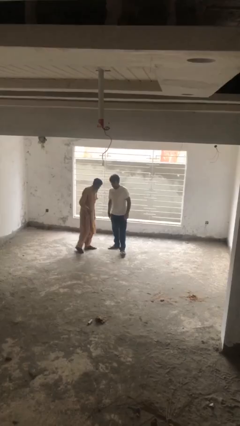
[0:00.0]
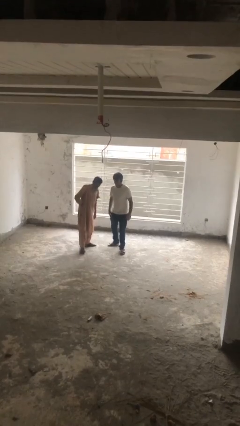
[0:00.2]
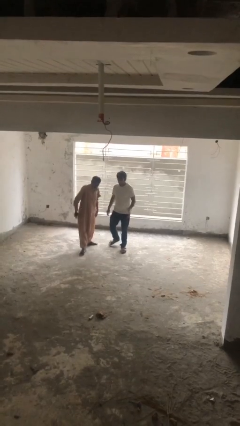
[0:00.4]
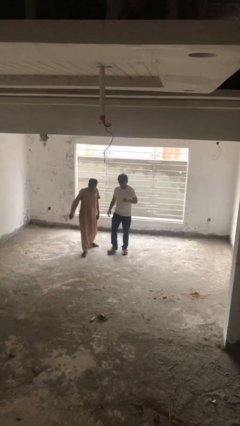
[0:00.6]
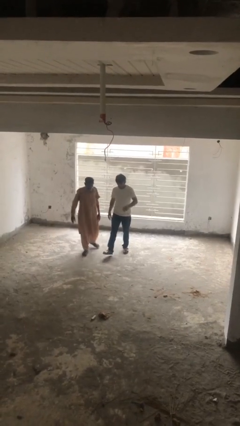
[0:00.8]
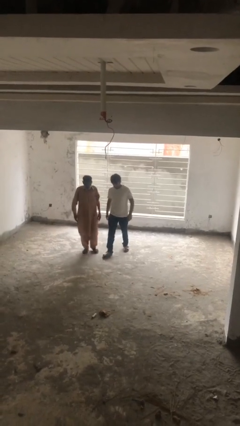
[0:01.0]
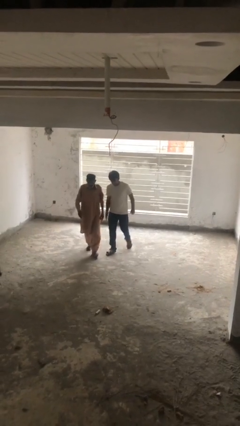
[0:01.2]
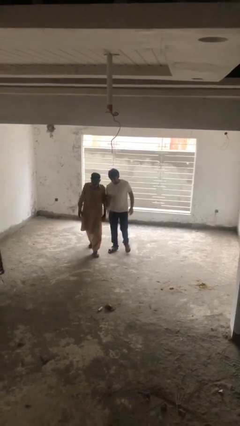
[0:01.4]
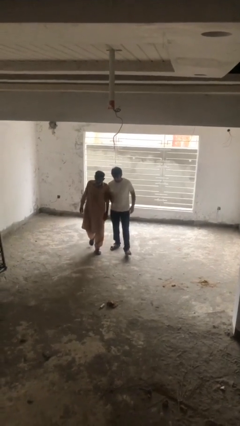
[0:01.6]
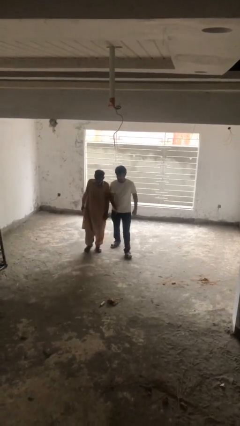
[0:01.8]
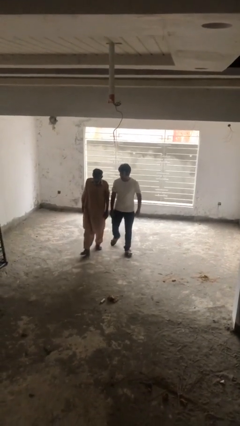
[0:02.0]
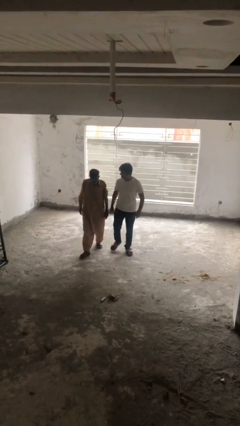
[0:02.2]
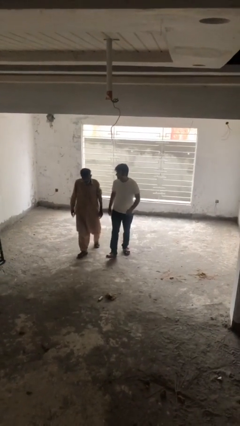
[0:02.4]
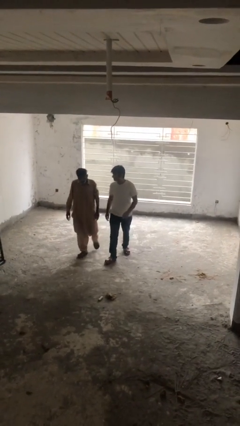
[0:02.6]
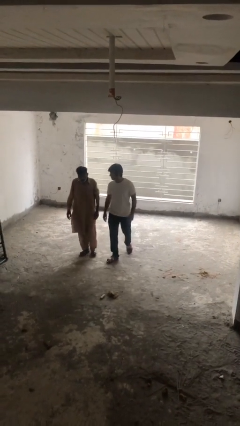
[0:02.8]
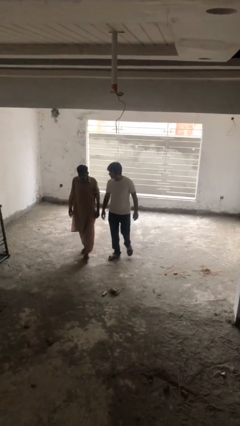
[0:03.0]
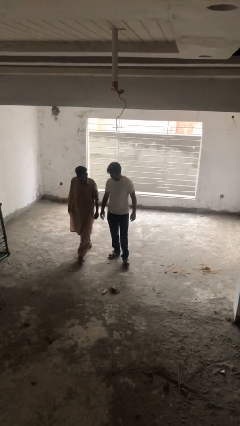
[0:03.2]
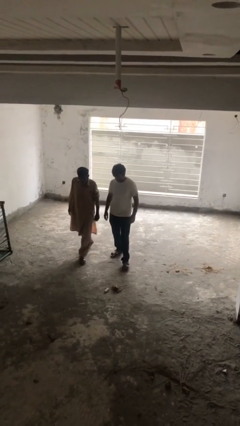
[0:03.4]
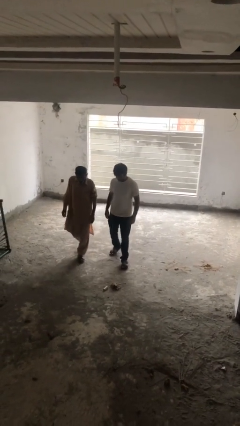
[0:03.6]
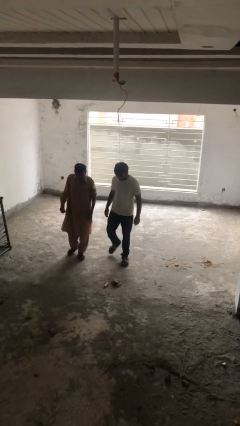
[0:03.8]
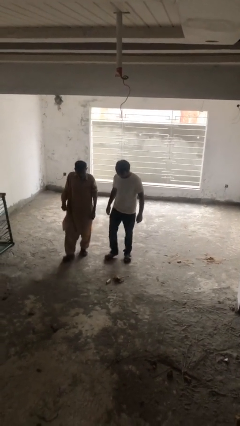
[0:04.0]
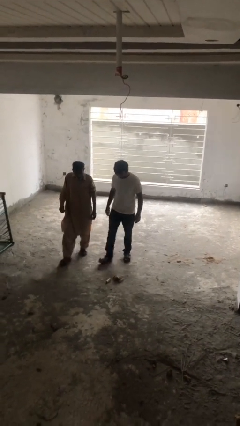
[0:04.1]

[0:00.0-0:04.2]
person talks to person

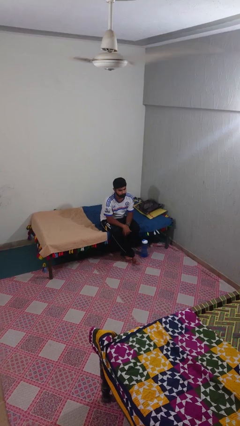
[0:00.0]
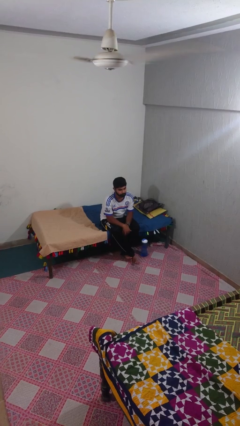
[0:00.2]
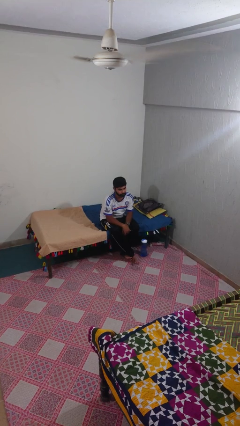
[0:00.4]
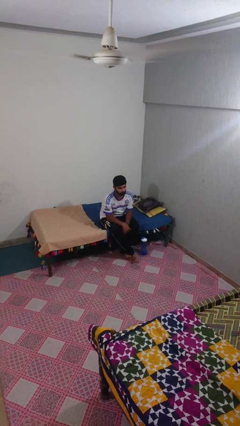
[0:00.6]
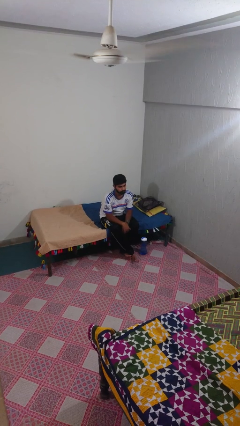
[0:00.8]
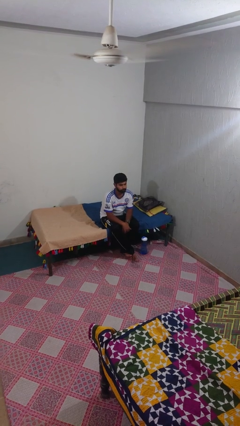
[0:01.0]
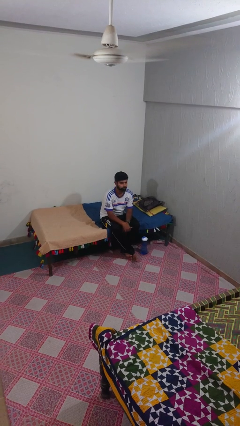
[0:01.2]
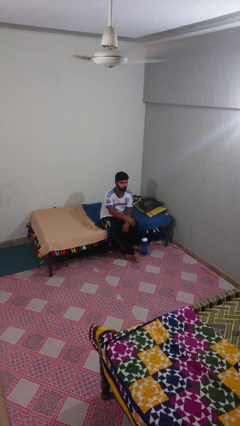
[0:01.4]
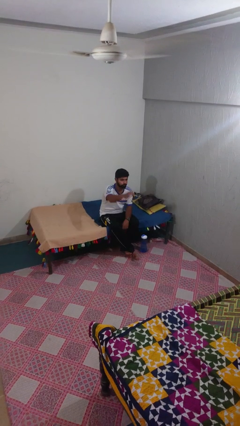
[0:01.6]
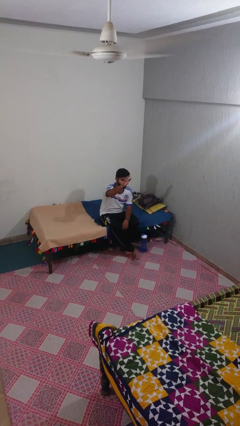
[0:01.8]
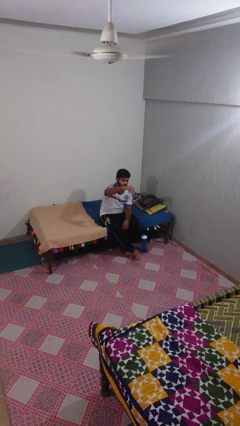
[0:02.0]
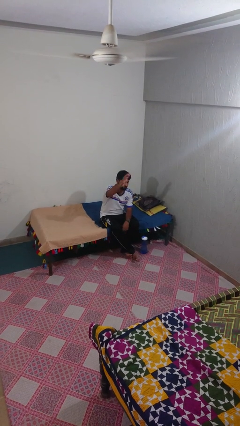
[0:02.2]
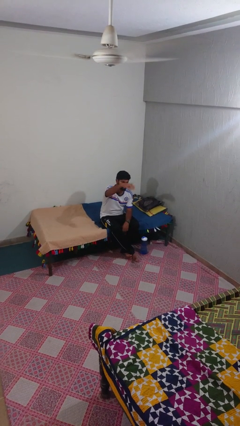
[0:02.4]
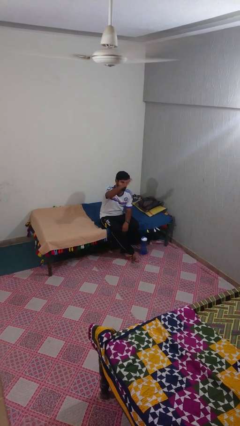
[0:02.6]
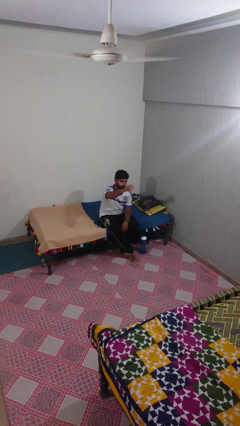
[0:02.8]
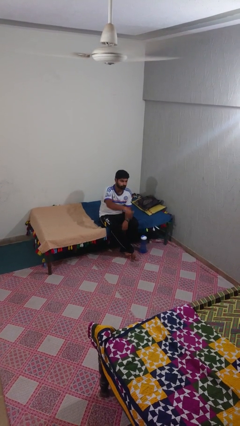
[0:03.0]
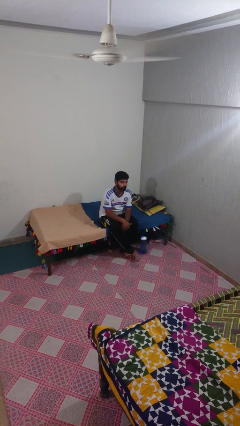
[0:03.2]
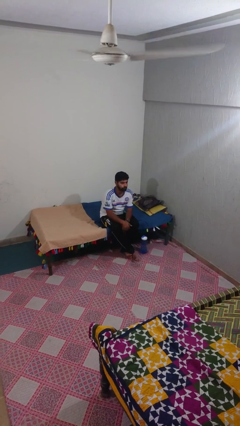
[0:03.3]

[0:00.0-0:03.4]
person gestures come here

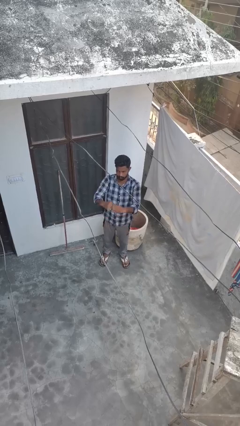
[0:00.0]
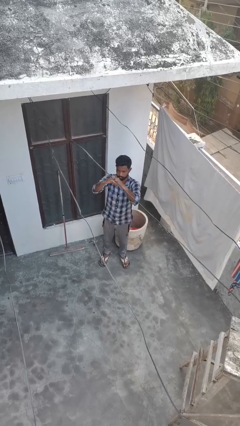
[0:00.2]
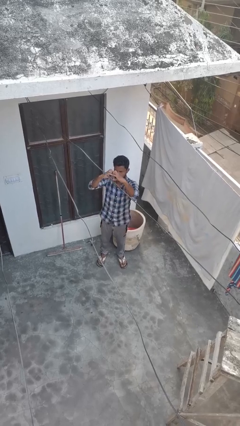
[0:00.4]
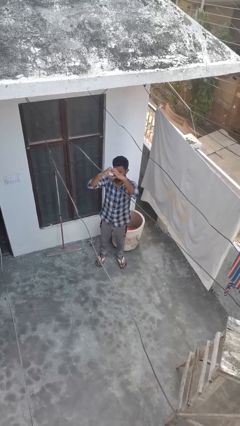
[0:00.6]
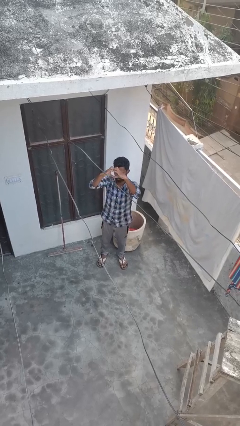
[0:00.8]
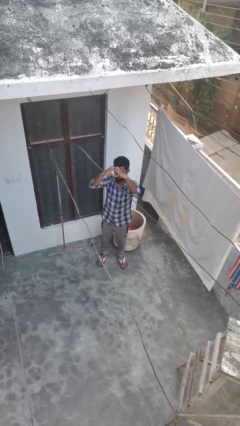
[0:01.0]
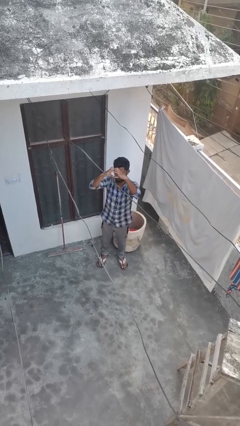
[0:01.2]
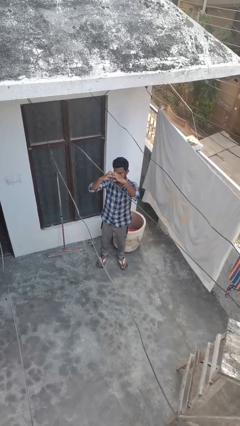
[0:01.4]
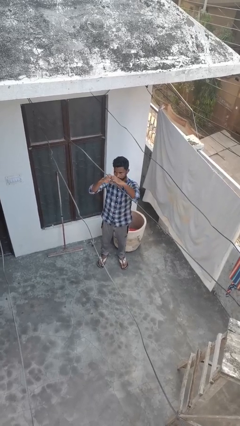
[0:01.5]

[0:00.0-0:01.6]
person gestures heart

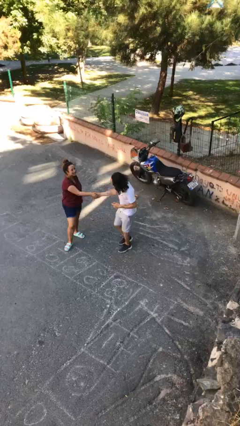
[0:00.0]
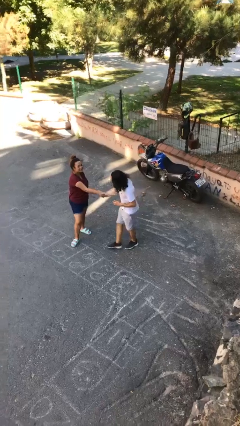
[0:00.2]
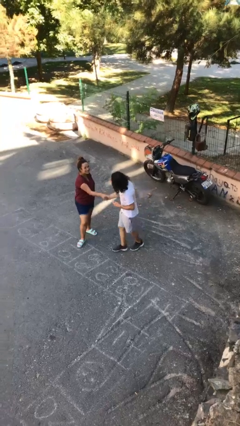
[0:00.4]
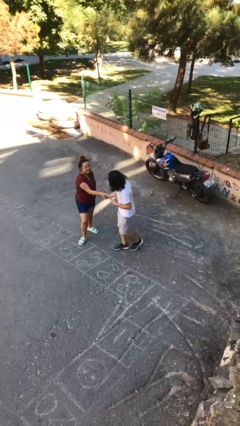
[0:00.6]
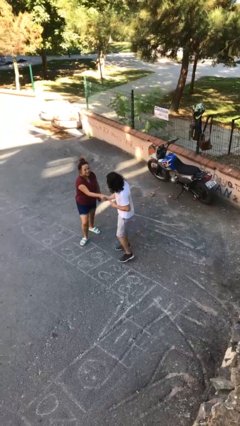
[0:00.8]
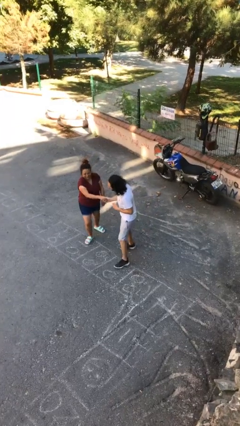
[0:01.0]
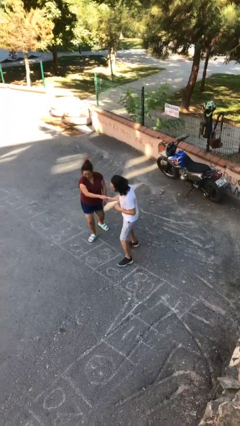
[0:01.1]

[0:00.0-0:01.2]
person shakes hand

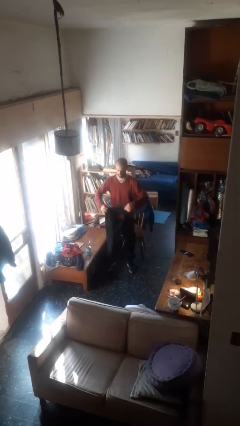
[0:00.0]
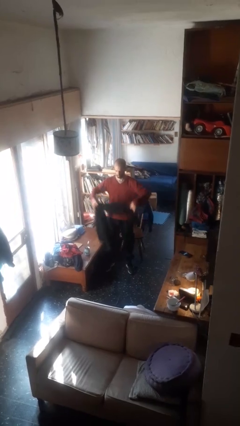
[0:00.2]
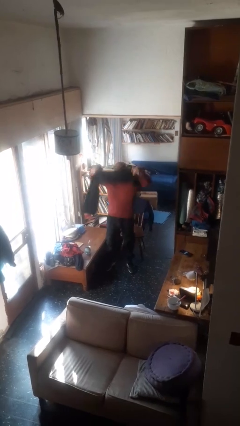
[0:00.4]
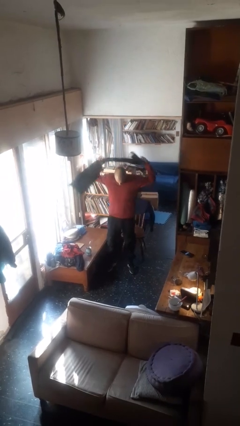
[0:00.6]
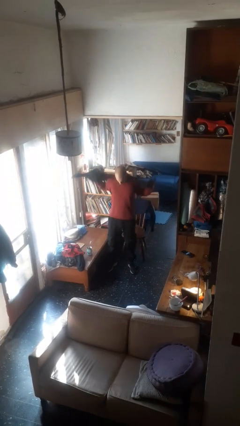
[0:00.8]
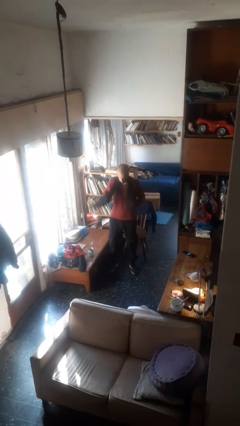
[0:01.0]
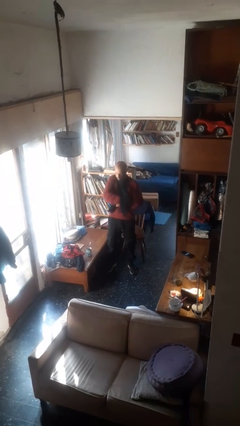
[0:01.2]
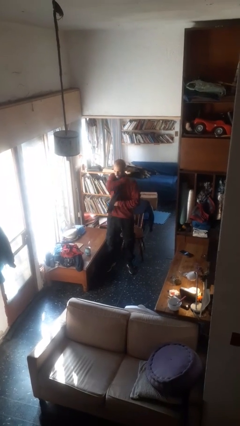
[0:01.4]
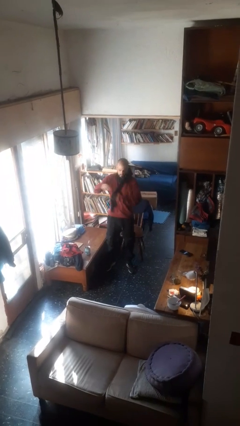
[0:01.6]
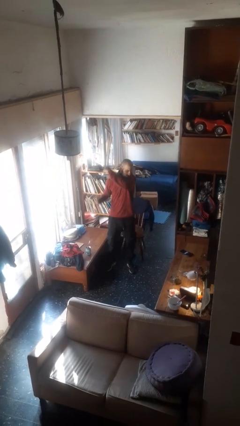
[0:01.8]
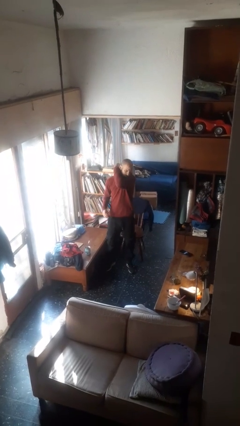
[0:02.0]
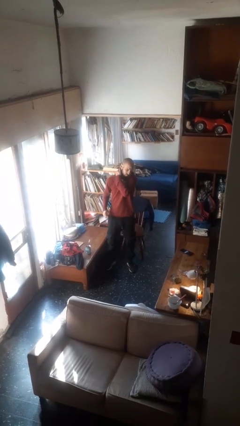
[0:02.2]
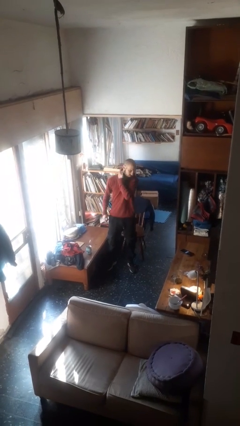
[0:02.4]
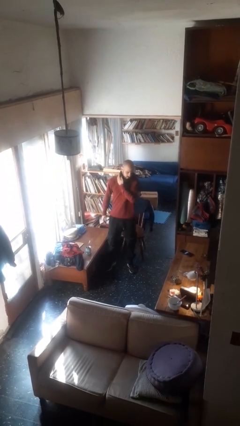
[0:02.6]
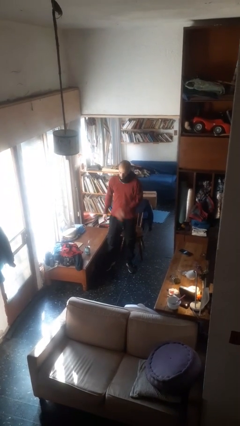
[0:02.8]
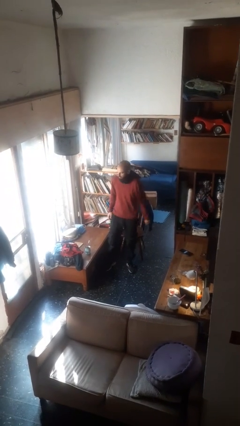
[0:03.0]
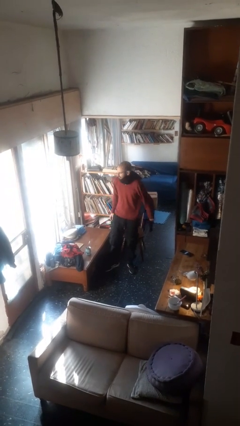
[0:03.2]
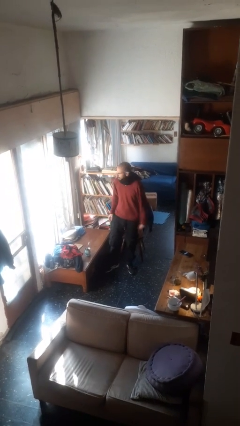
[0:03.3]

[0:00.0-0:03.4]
person puts on scarf

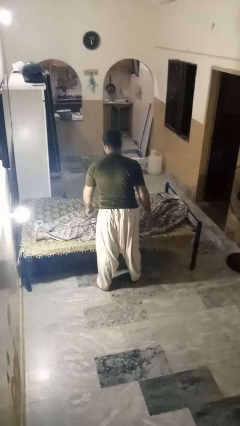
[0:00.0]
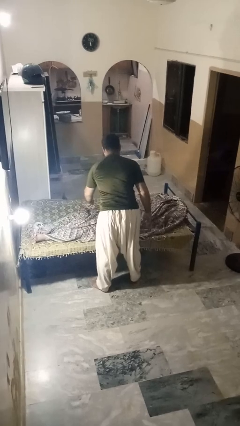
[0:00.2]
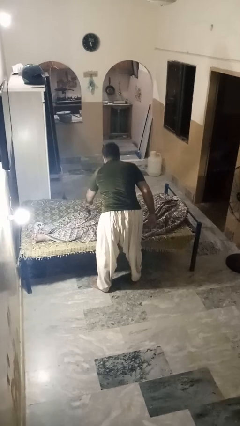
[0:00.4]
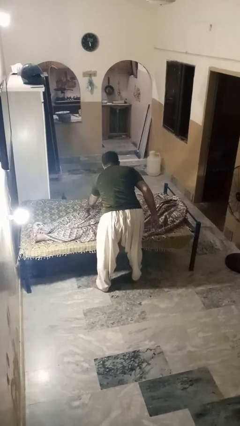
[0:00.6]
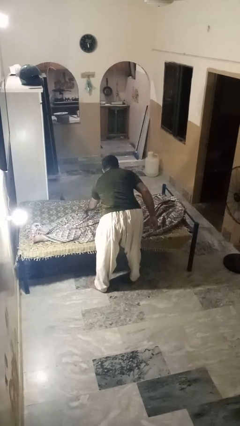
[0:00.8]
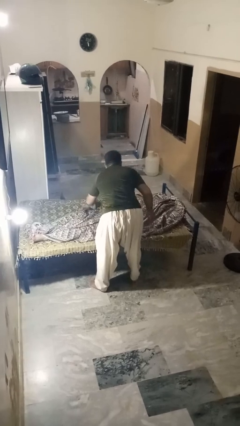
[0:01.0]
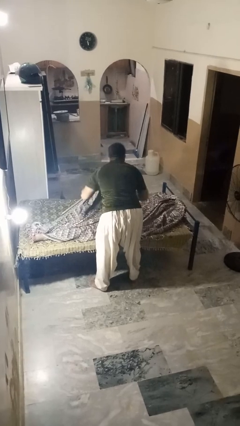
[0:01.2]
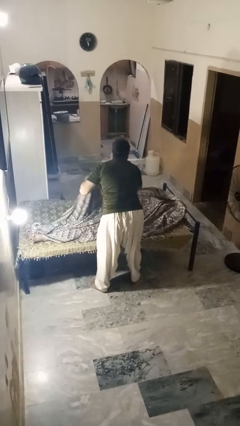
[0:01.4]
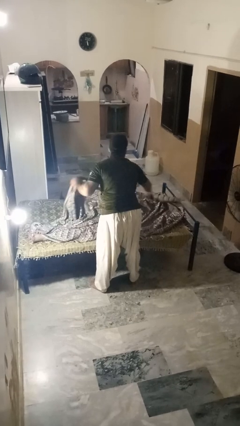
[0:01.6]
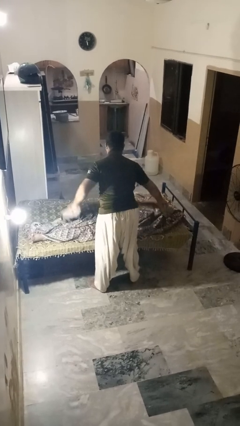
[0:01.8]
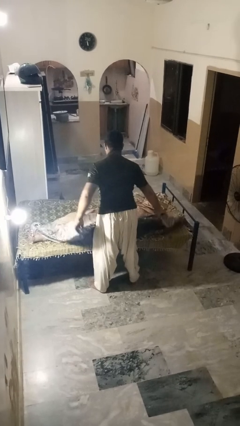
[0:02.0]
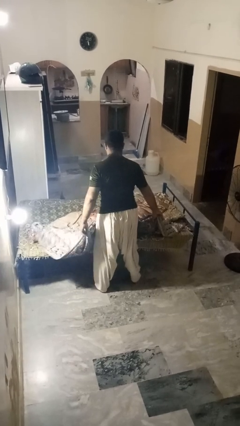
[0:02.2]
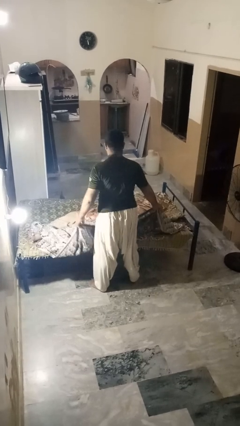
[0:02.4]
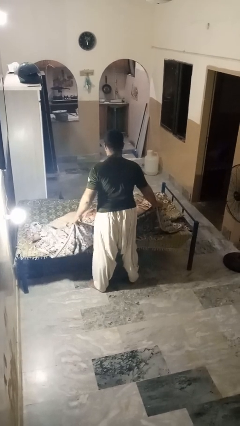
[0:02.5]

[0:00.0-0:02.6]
person uncovers friend with blanket

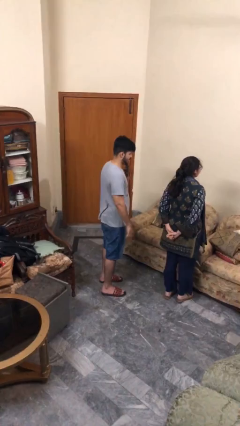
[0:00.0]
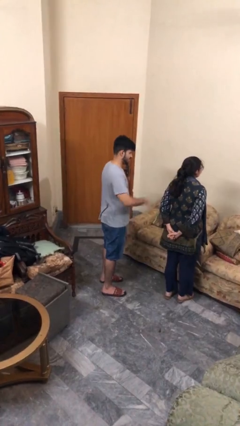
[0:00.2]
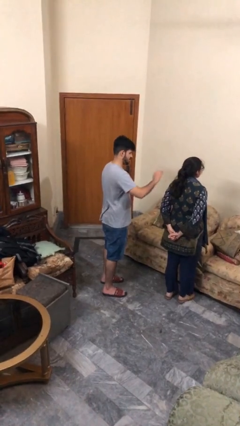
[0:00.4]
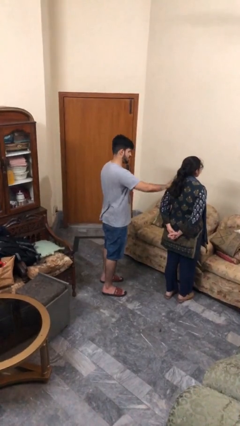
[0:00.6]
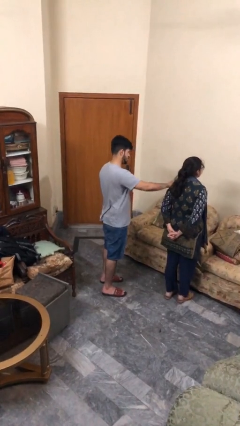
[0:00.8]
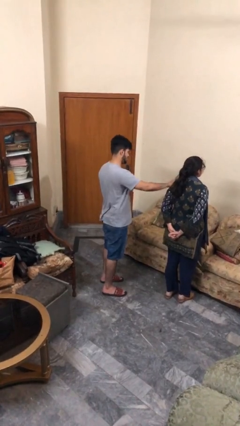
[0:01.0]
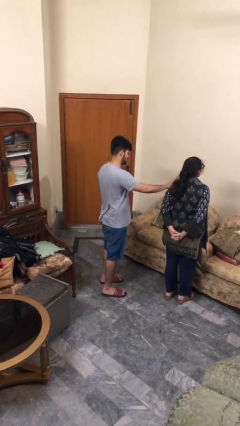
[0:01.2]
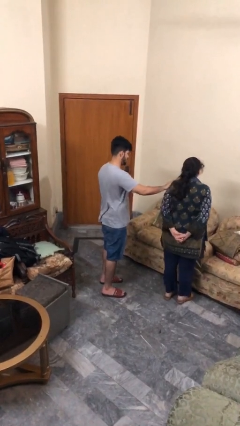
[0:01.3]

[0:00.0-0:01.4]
person grabs person by shoulder
